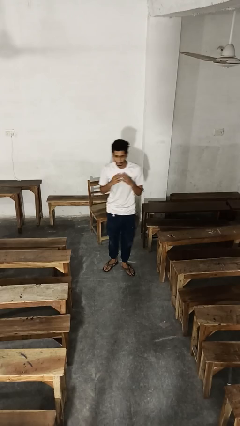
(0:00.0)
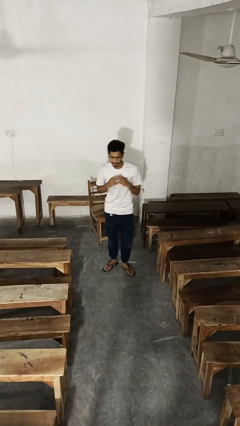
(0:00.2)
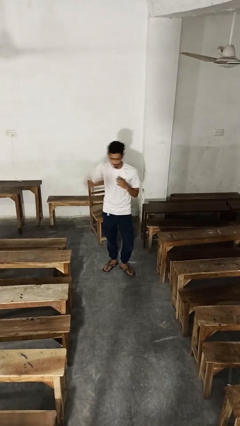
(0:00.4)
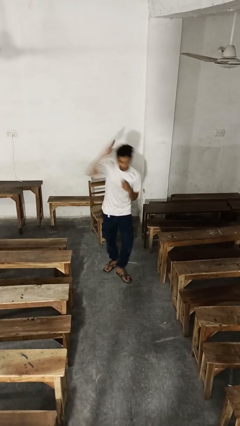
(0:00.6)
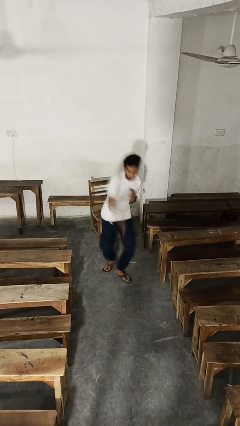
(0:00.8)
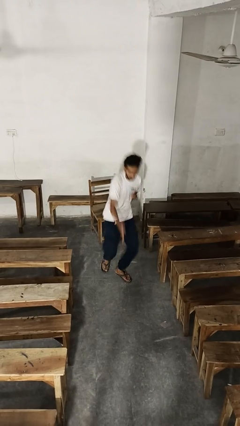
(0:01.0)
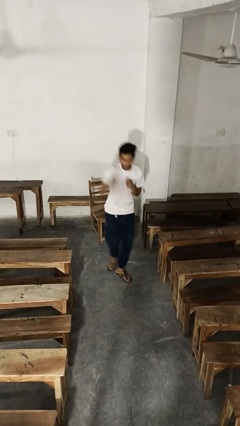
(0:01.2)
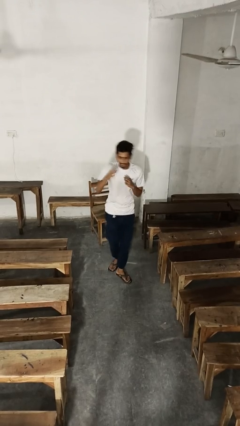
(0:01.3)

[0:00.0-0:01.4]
person karate chop

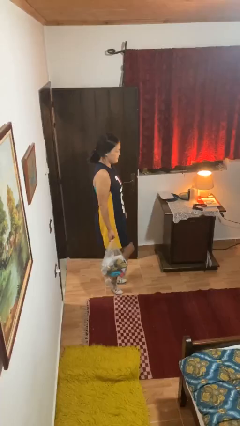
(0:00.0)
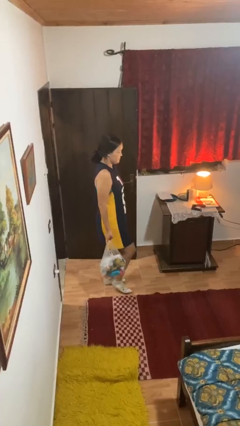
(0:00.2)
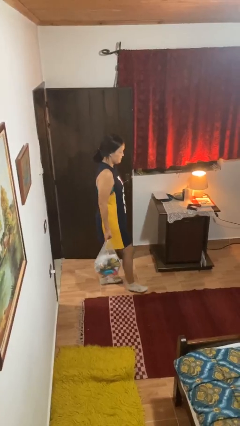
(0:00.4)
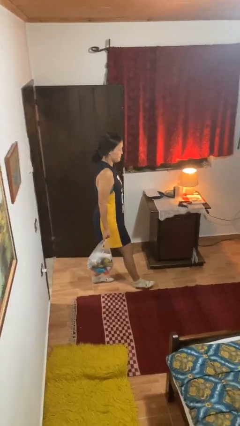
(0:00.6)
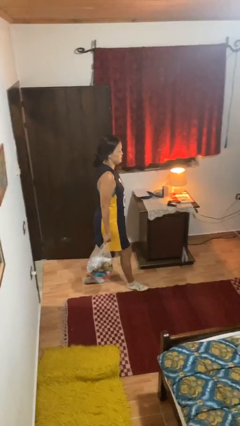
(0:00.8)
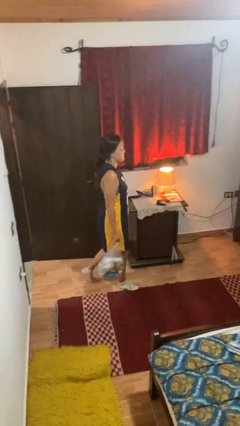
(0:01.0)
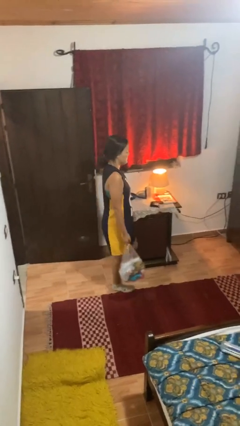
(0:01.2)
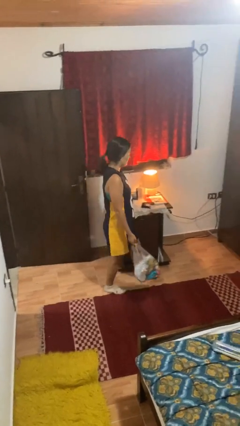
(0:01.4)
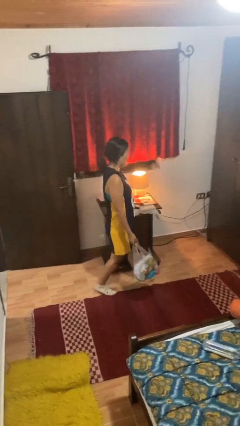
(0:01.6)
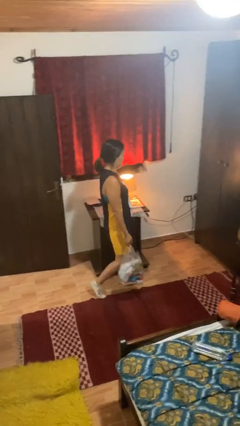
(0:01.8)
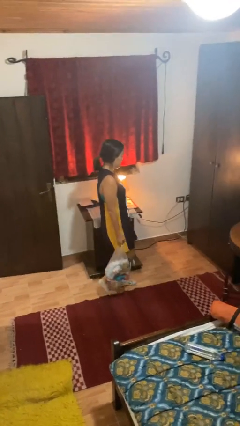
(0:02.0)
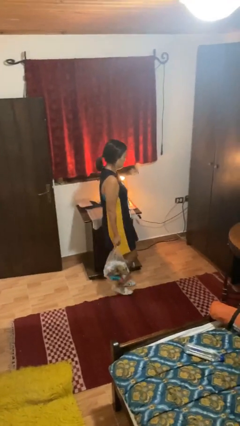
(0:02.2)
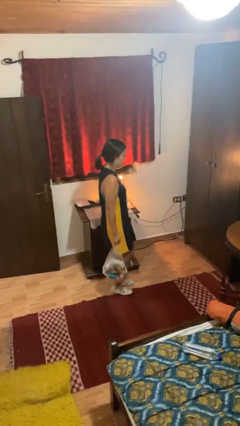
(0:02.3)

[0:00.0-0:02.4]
person carries groceries

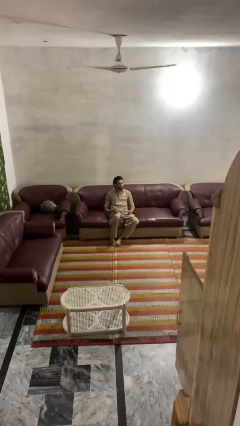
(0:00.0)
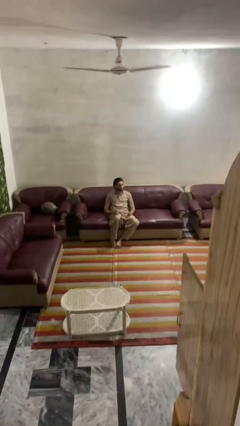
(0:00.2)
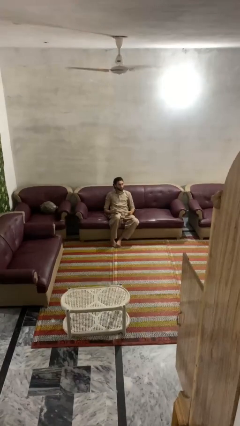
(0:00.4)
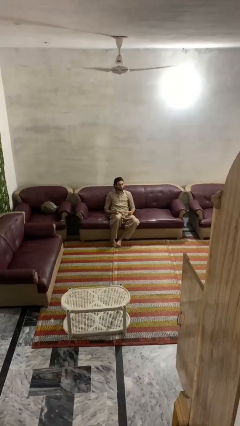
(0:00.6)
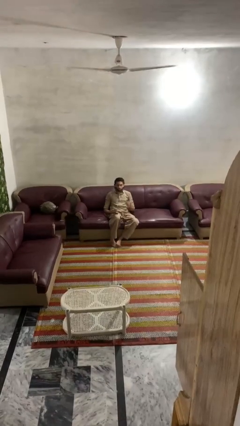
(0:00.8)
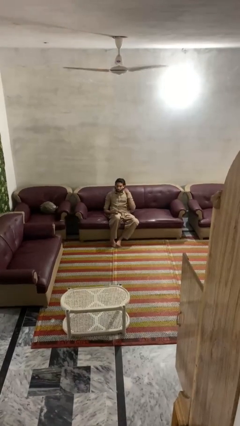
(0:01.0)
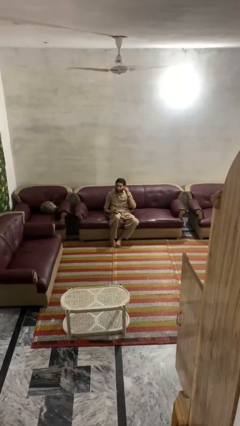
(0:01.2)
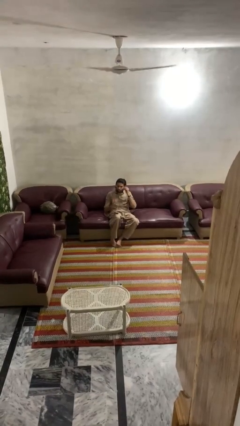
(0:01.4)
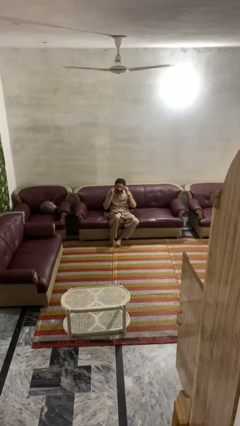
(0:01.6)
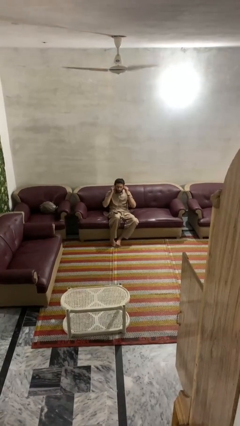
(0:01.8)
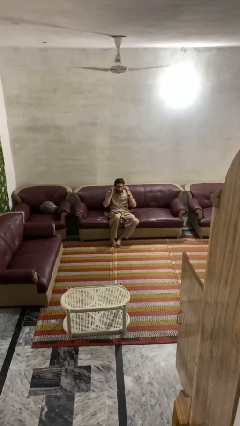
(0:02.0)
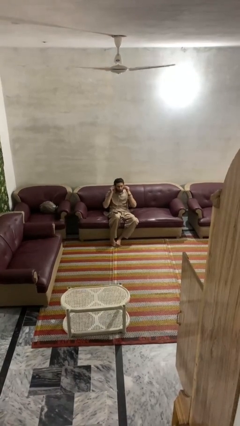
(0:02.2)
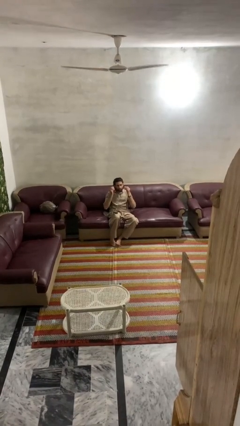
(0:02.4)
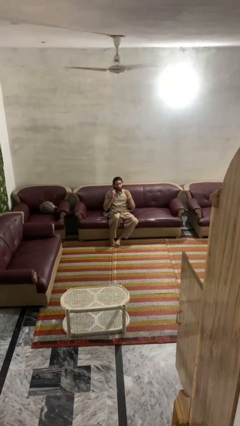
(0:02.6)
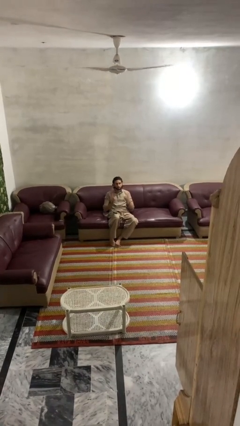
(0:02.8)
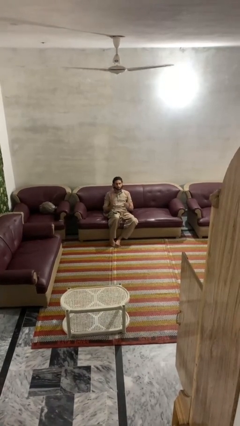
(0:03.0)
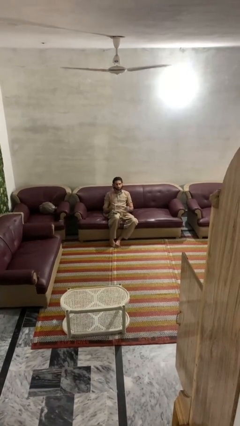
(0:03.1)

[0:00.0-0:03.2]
person takes off headphones

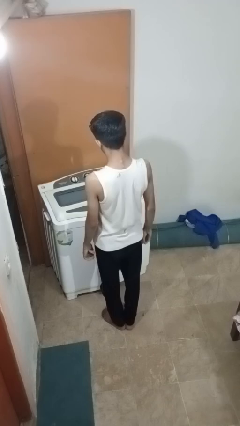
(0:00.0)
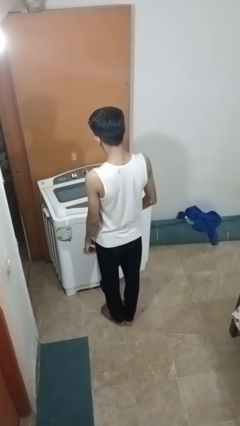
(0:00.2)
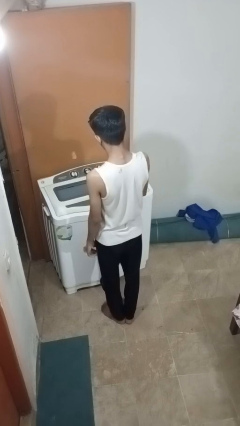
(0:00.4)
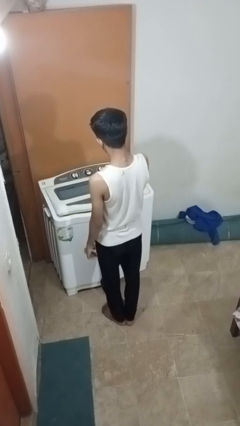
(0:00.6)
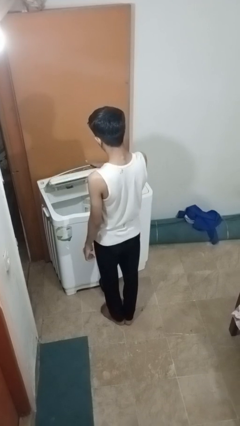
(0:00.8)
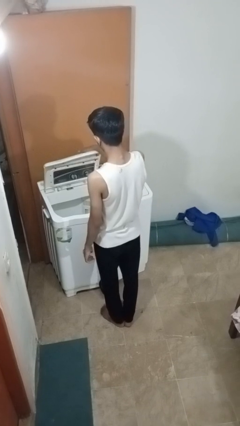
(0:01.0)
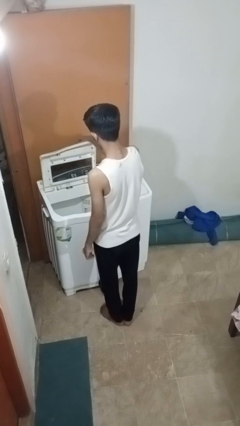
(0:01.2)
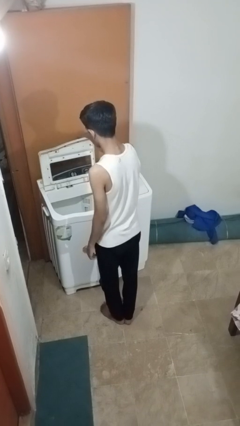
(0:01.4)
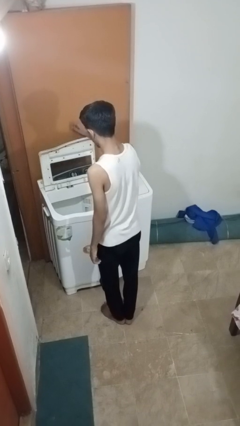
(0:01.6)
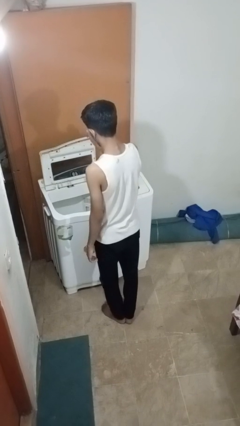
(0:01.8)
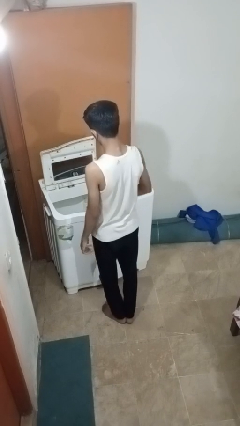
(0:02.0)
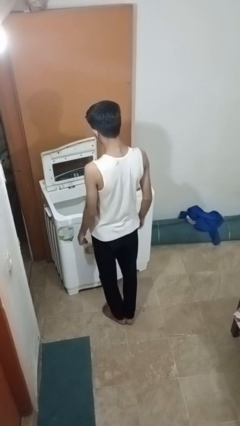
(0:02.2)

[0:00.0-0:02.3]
person opens clothes washer

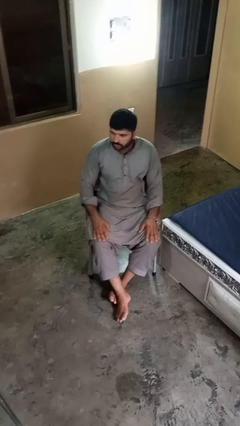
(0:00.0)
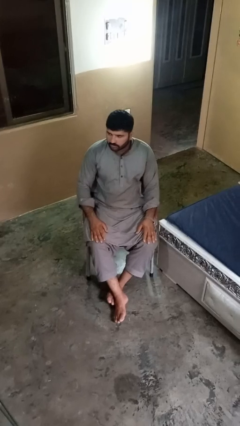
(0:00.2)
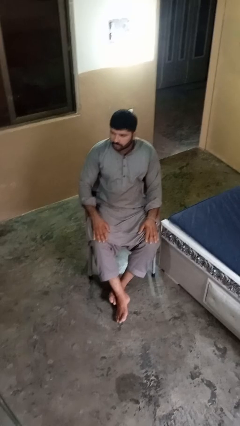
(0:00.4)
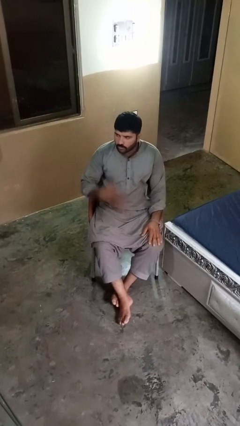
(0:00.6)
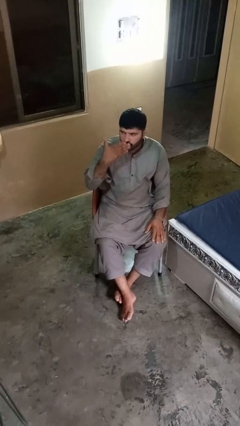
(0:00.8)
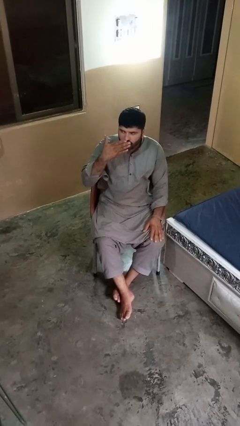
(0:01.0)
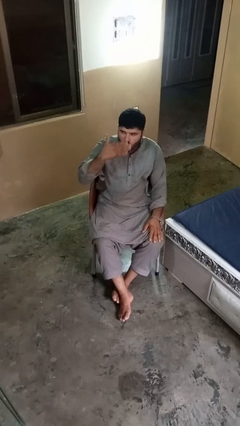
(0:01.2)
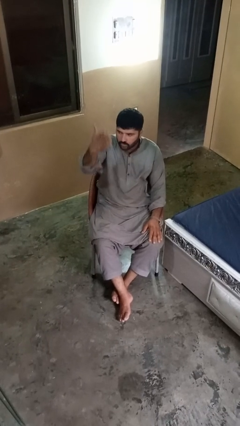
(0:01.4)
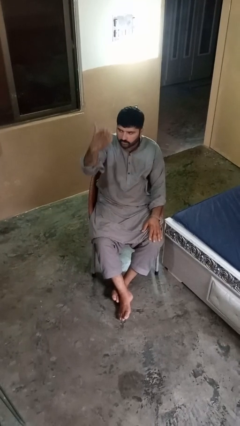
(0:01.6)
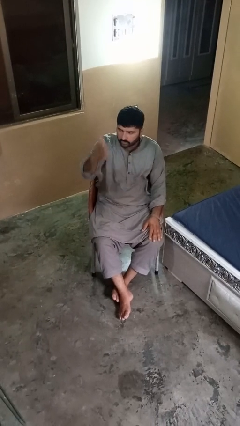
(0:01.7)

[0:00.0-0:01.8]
person gestures blow kiss

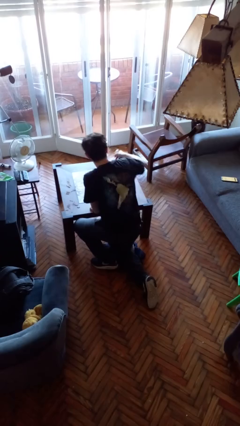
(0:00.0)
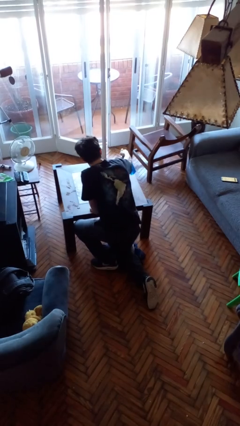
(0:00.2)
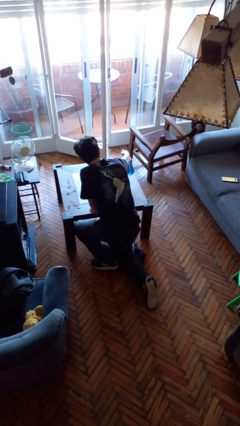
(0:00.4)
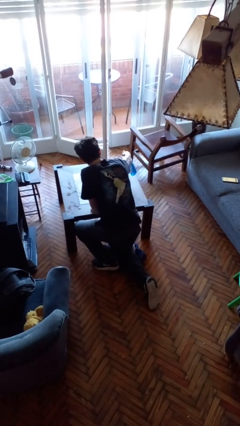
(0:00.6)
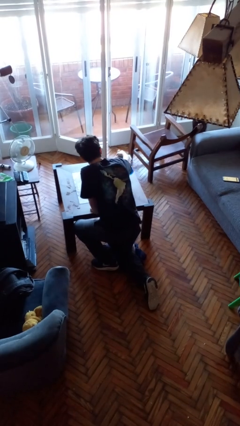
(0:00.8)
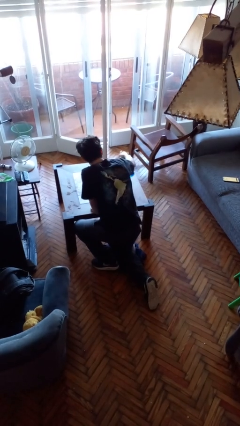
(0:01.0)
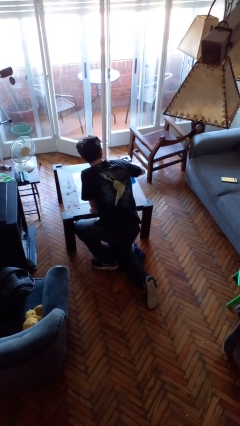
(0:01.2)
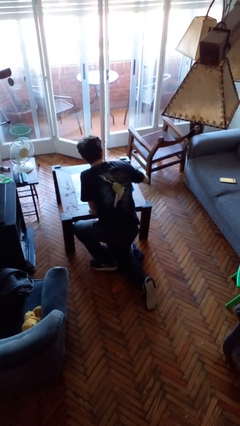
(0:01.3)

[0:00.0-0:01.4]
person sprays from bottle

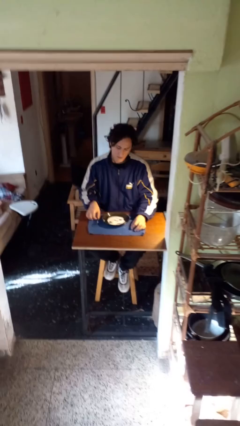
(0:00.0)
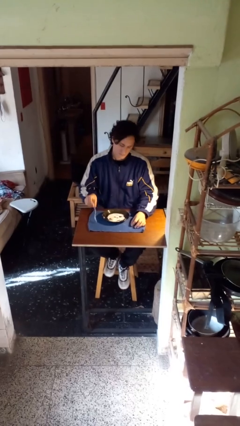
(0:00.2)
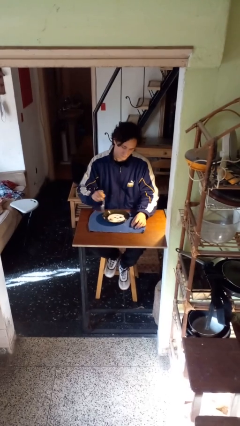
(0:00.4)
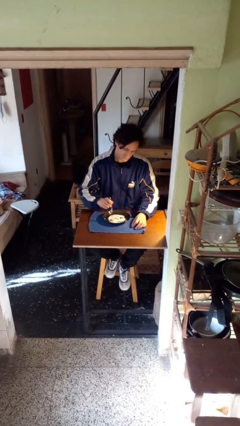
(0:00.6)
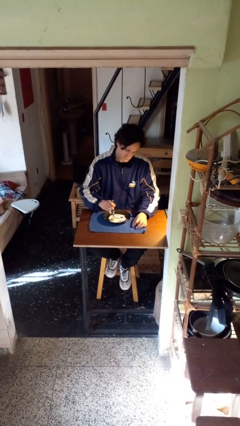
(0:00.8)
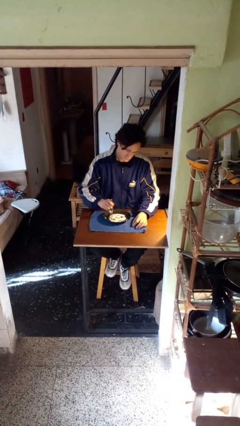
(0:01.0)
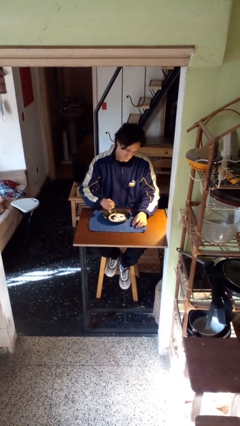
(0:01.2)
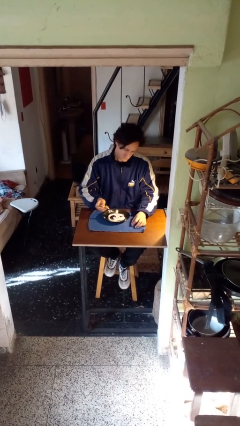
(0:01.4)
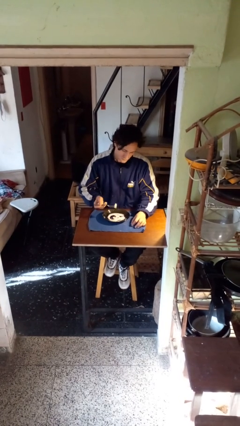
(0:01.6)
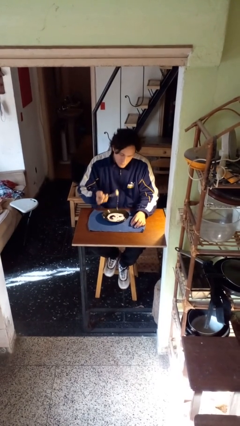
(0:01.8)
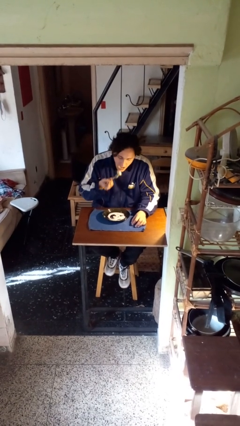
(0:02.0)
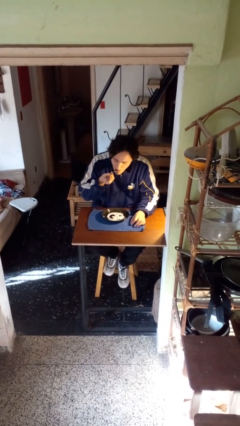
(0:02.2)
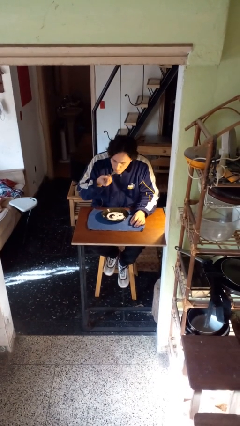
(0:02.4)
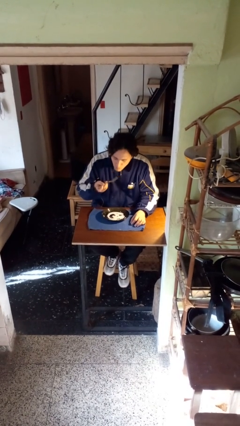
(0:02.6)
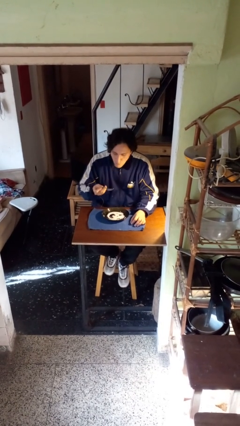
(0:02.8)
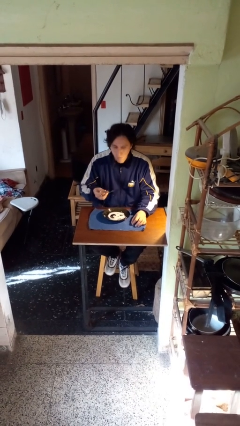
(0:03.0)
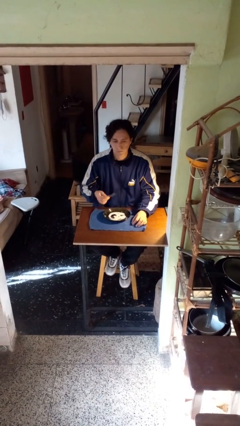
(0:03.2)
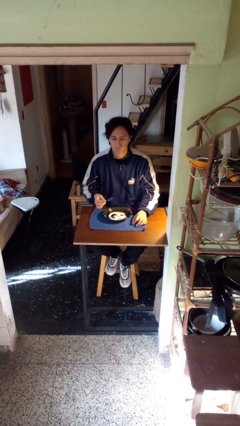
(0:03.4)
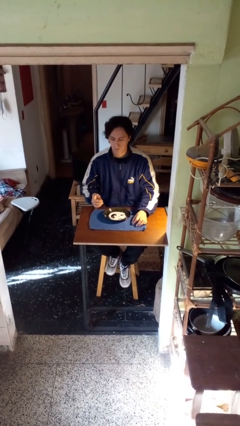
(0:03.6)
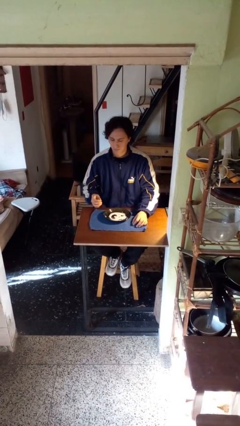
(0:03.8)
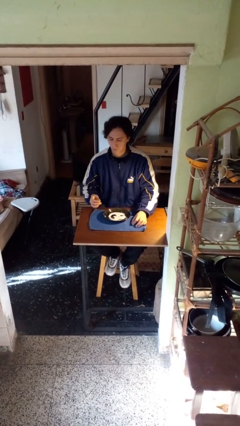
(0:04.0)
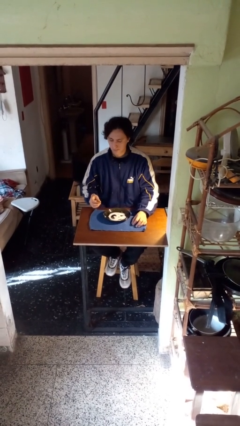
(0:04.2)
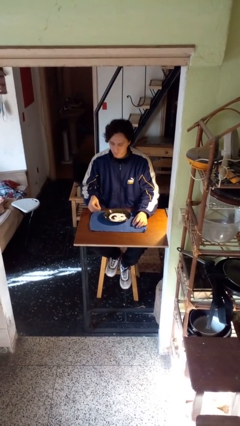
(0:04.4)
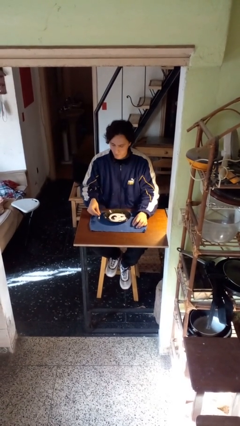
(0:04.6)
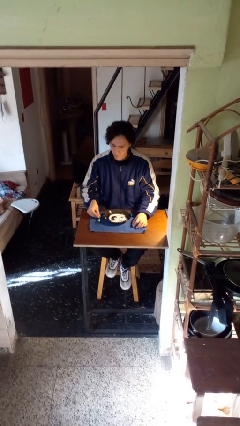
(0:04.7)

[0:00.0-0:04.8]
person eats with utensil

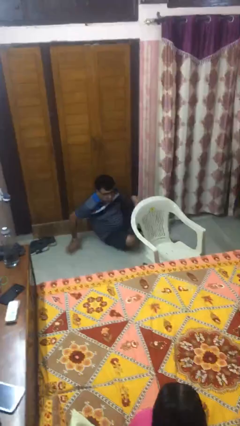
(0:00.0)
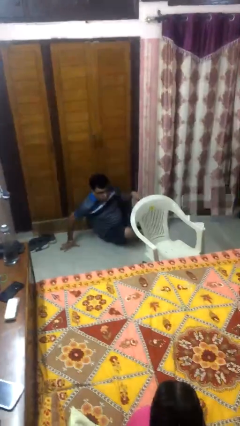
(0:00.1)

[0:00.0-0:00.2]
person stands up from floor
